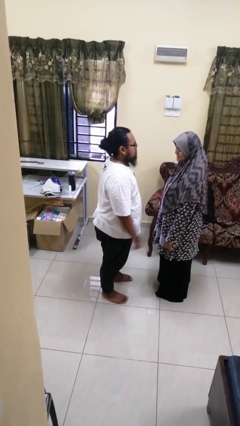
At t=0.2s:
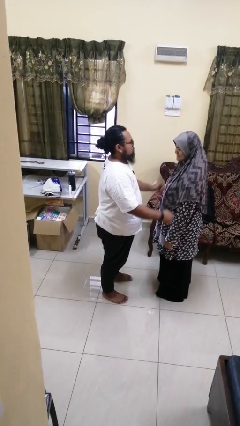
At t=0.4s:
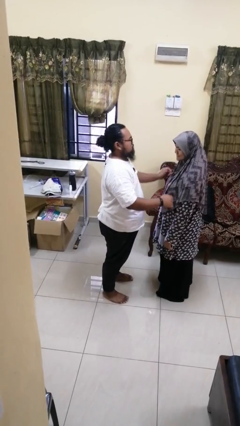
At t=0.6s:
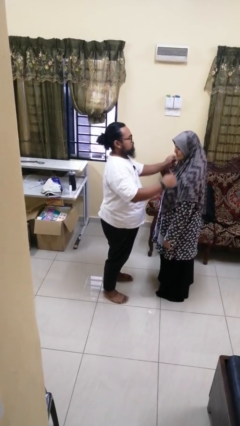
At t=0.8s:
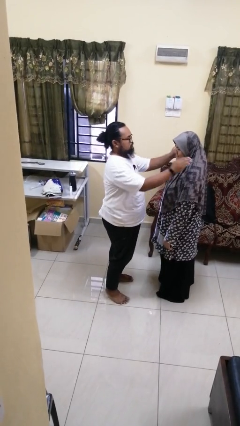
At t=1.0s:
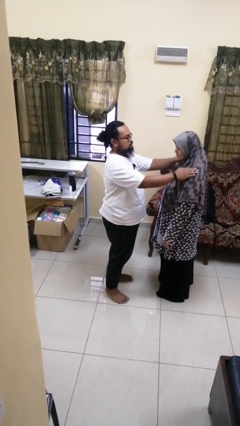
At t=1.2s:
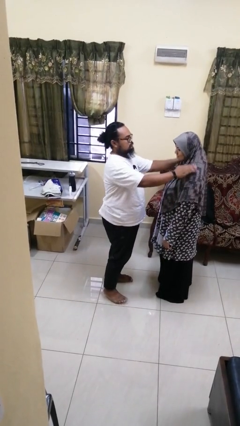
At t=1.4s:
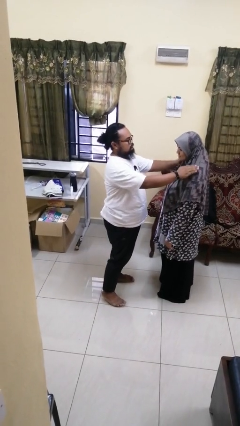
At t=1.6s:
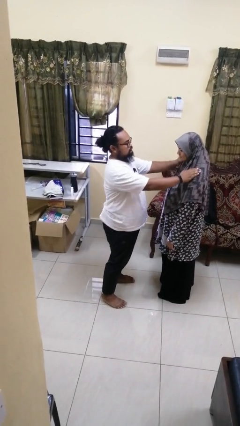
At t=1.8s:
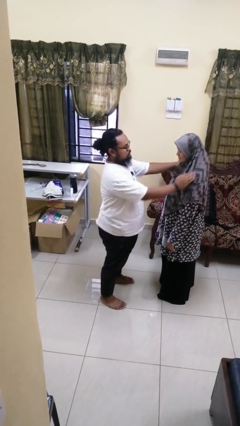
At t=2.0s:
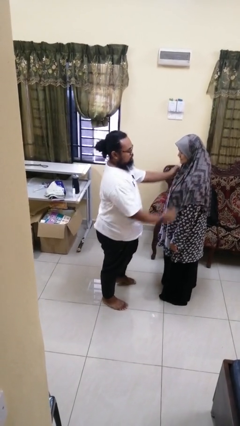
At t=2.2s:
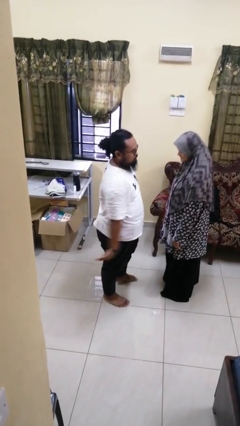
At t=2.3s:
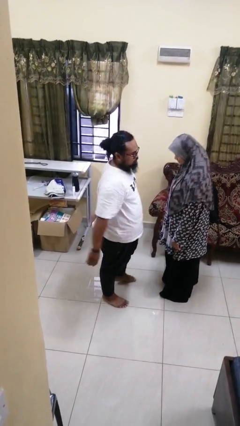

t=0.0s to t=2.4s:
person pounds shoulders of person

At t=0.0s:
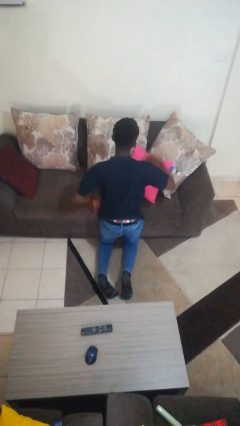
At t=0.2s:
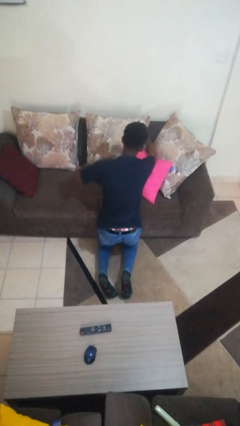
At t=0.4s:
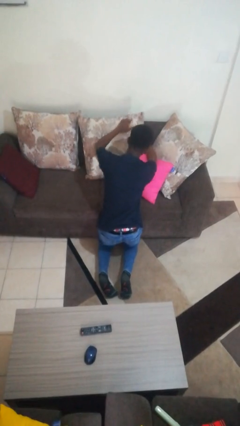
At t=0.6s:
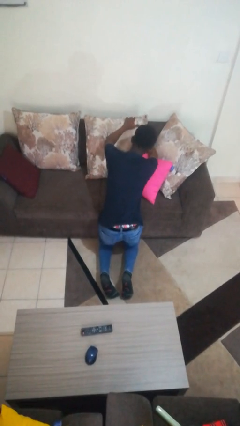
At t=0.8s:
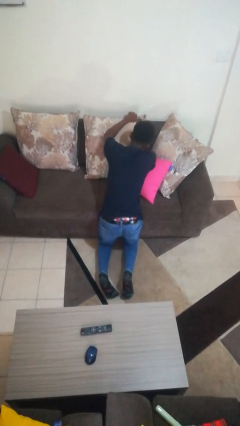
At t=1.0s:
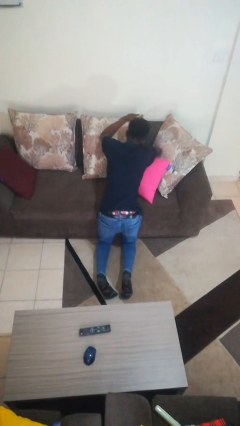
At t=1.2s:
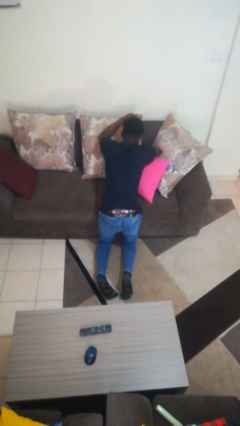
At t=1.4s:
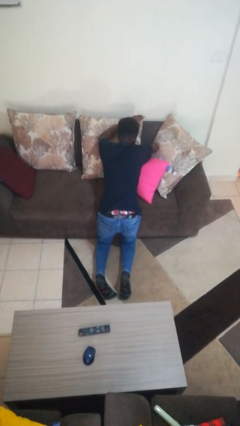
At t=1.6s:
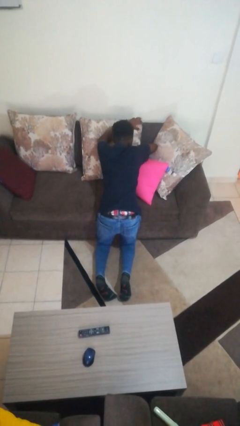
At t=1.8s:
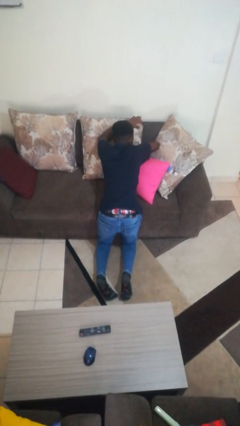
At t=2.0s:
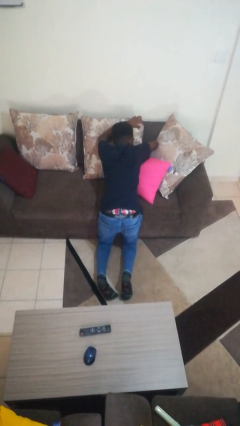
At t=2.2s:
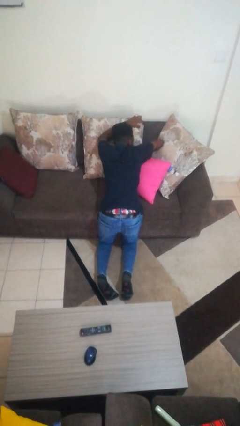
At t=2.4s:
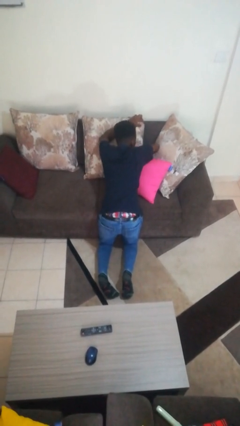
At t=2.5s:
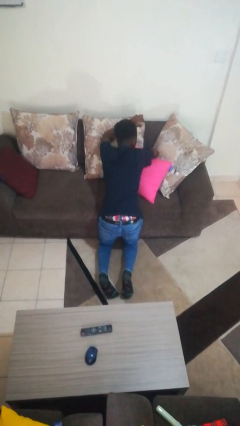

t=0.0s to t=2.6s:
person searches in couch

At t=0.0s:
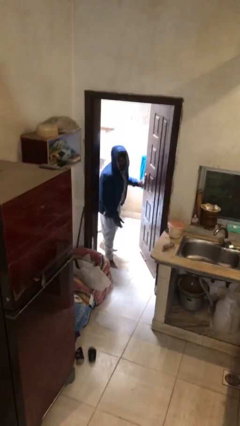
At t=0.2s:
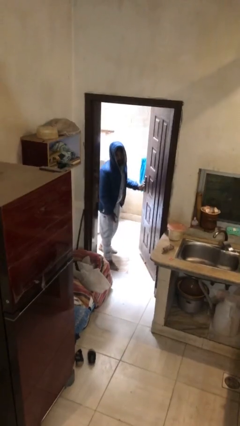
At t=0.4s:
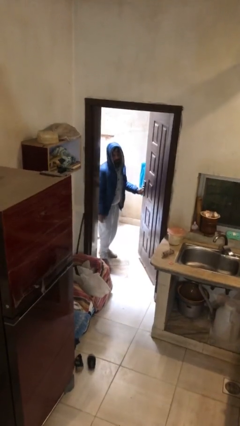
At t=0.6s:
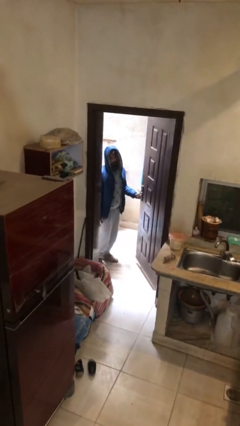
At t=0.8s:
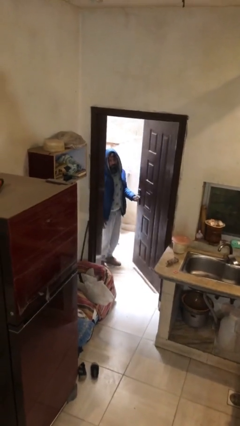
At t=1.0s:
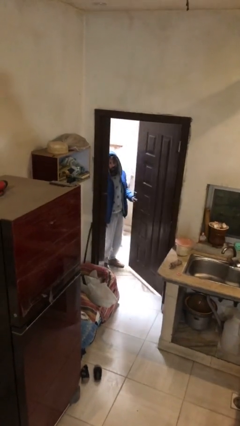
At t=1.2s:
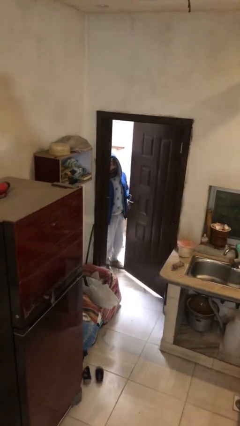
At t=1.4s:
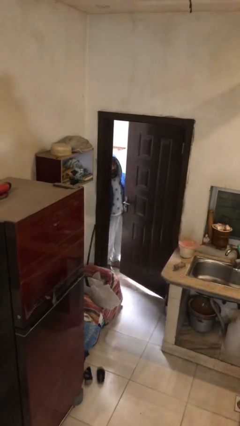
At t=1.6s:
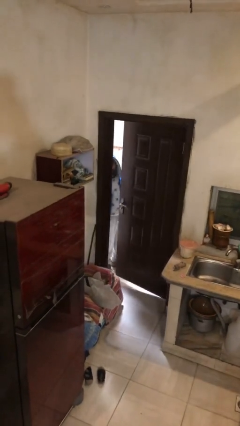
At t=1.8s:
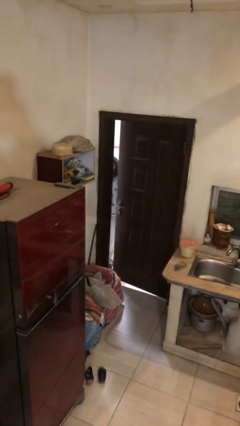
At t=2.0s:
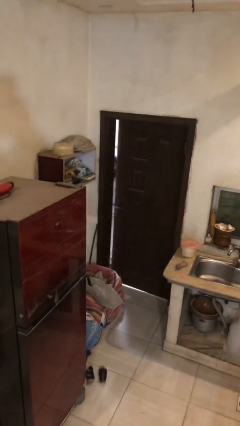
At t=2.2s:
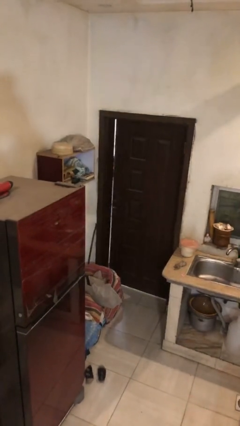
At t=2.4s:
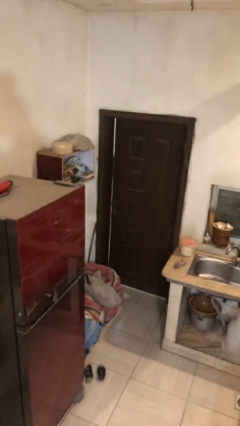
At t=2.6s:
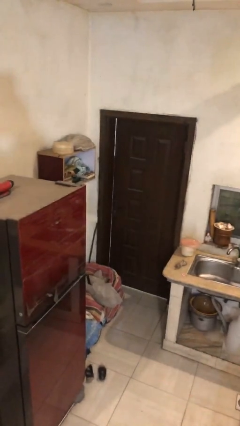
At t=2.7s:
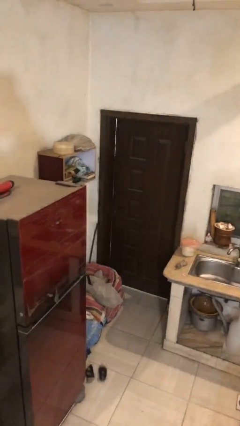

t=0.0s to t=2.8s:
person closes facility door

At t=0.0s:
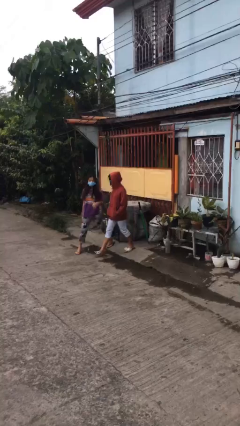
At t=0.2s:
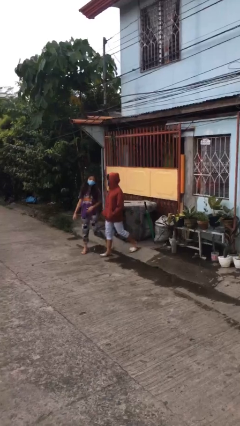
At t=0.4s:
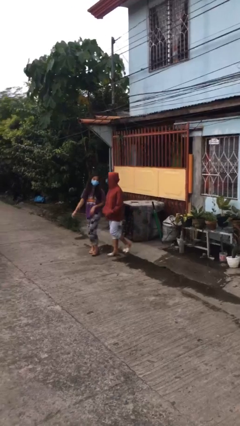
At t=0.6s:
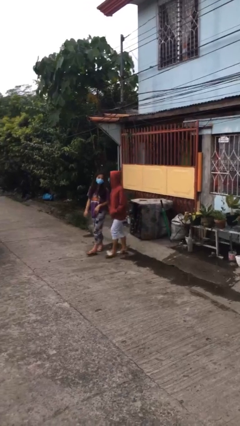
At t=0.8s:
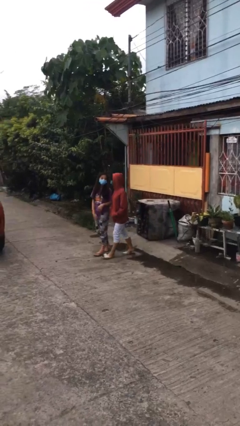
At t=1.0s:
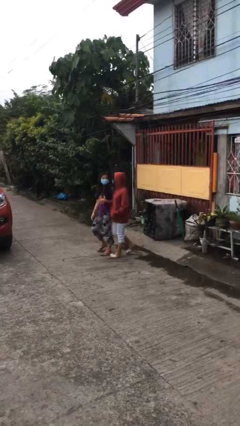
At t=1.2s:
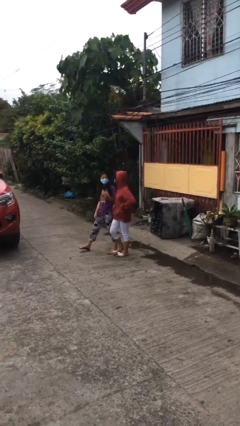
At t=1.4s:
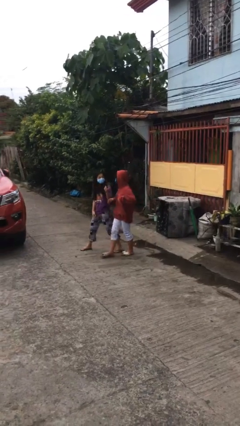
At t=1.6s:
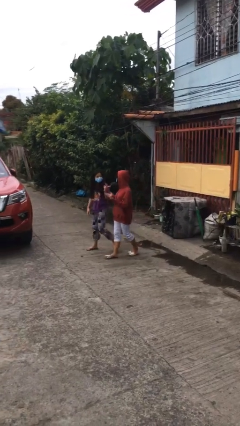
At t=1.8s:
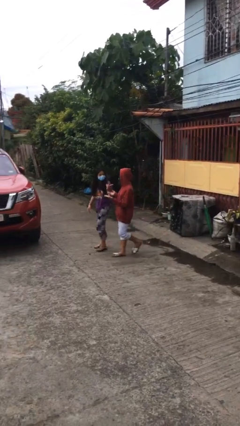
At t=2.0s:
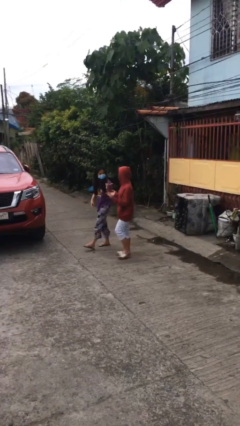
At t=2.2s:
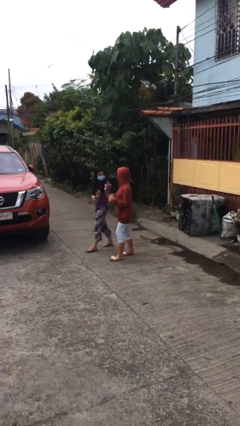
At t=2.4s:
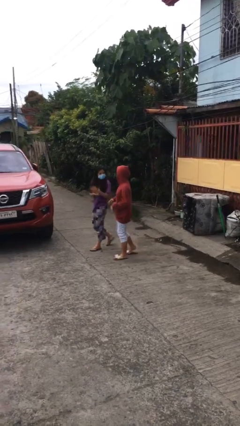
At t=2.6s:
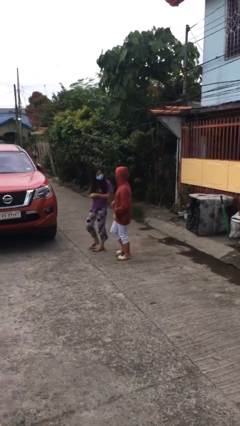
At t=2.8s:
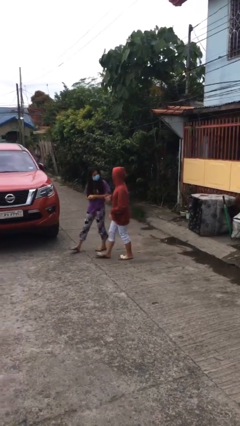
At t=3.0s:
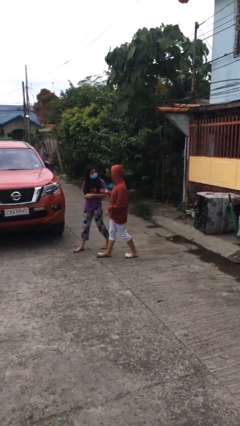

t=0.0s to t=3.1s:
person talks to person

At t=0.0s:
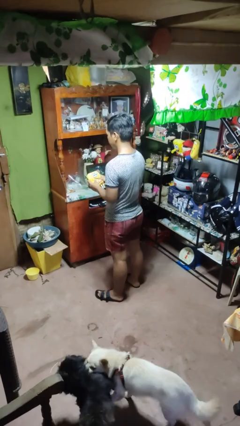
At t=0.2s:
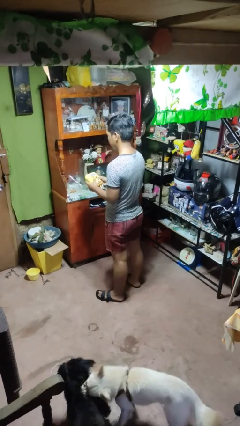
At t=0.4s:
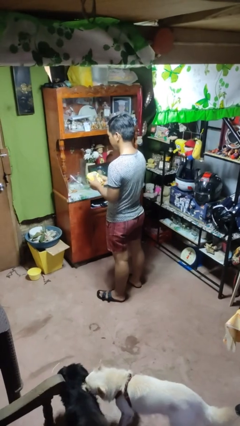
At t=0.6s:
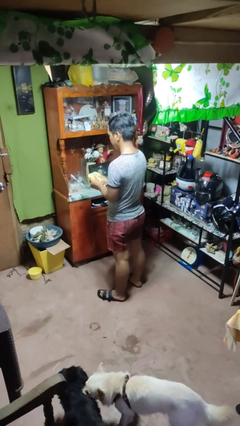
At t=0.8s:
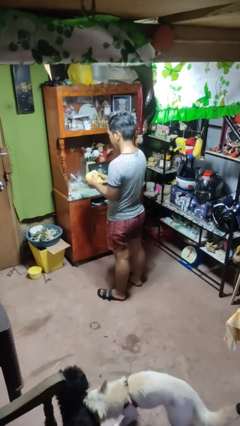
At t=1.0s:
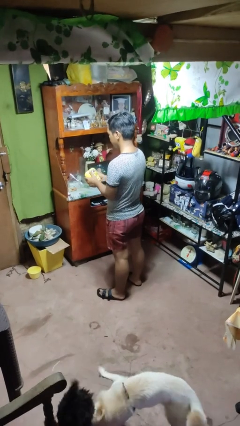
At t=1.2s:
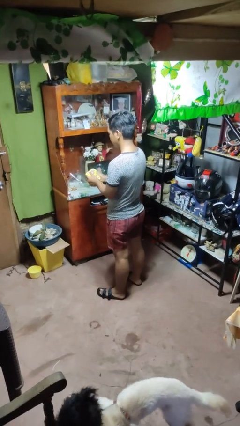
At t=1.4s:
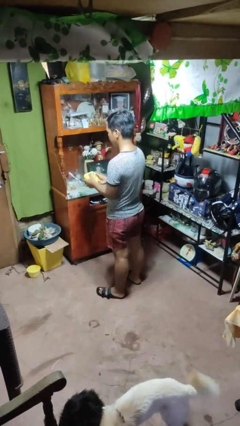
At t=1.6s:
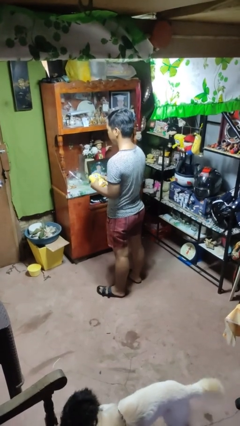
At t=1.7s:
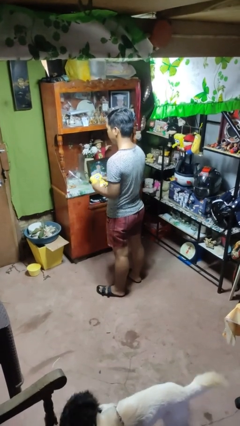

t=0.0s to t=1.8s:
person squeezes object

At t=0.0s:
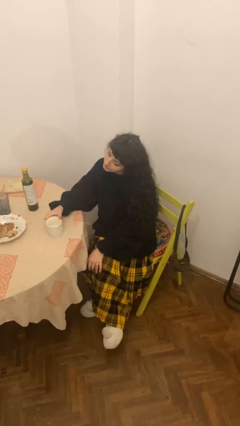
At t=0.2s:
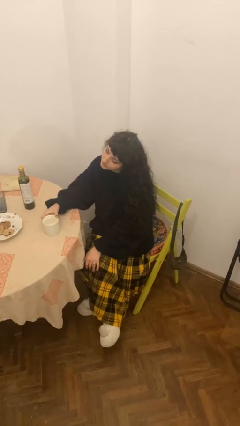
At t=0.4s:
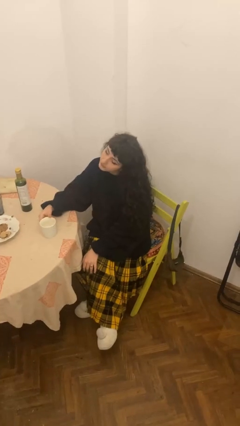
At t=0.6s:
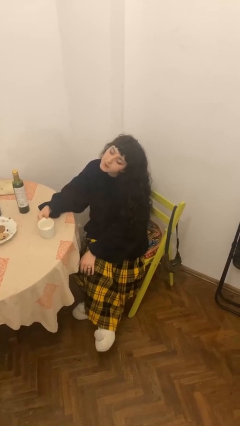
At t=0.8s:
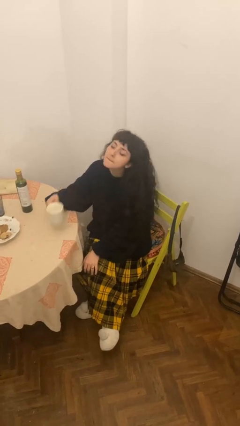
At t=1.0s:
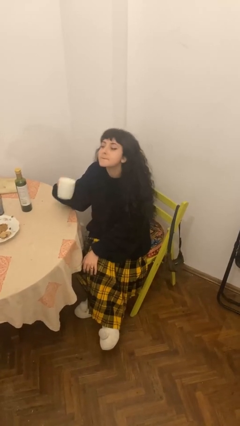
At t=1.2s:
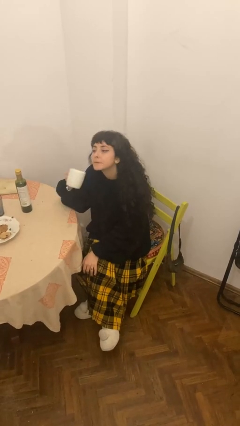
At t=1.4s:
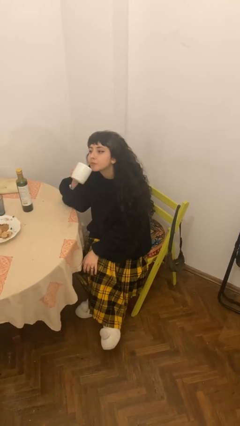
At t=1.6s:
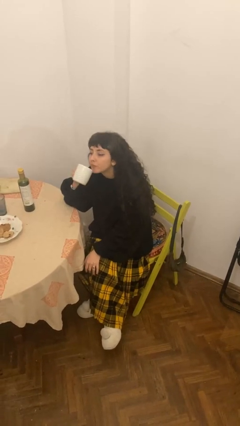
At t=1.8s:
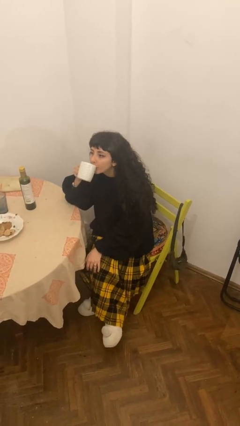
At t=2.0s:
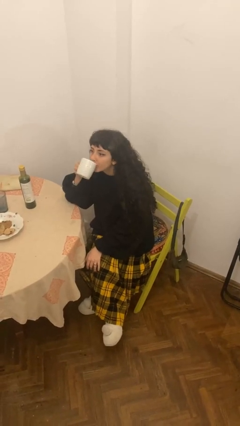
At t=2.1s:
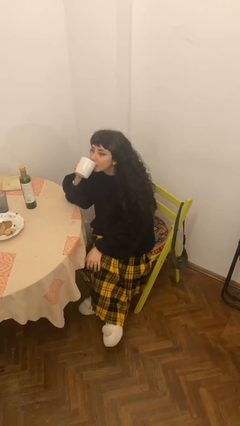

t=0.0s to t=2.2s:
person picks up object from table

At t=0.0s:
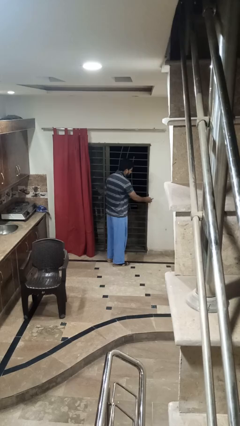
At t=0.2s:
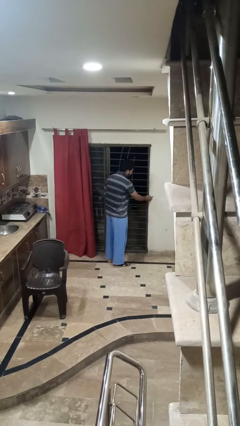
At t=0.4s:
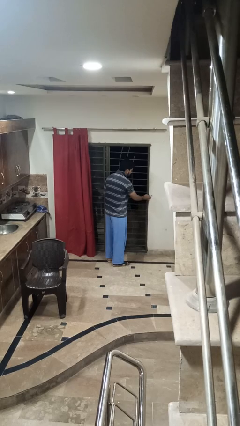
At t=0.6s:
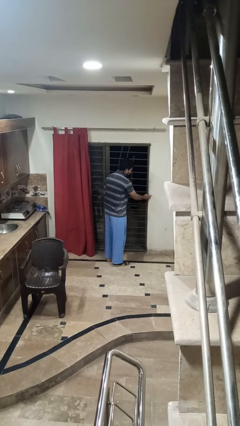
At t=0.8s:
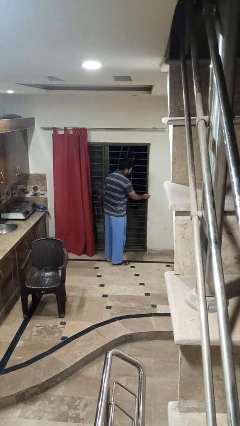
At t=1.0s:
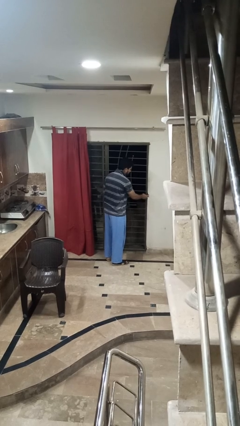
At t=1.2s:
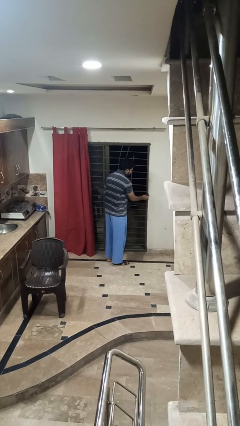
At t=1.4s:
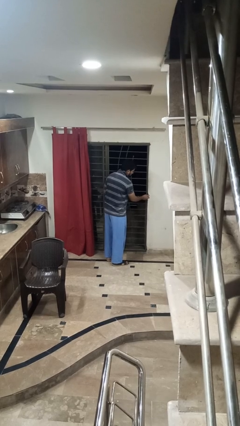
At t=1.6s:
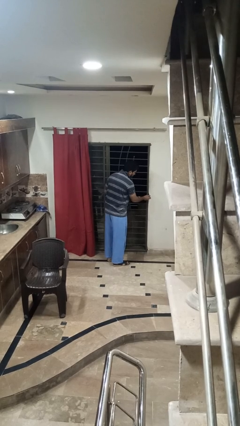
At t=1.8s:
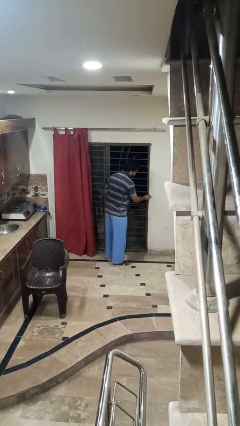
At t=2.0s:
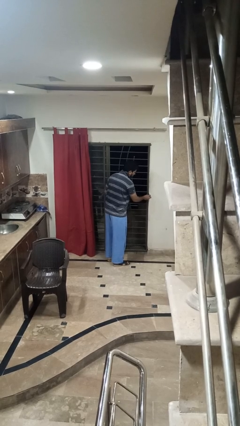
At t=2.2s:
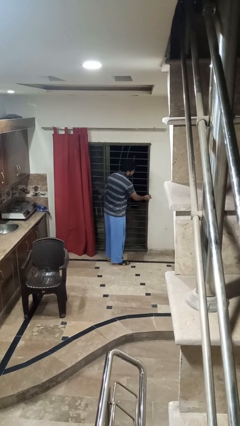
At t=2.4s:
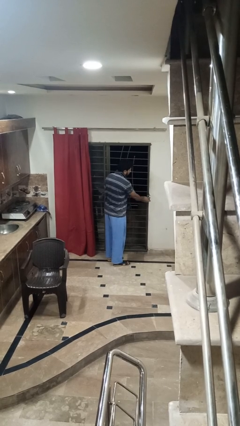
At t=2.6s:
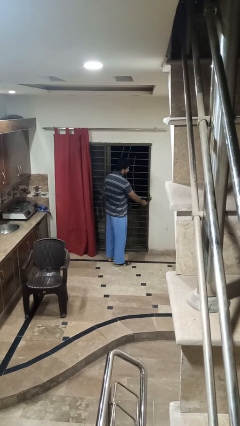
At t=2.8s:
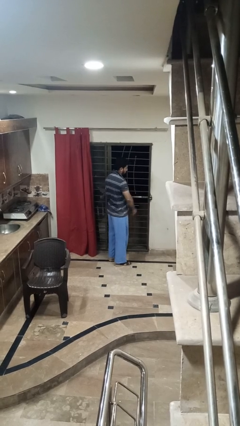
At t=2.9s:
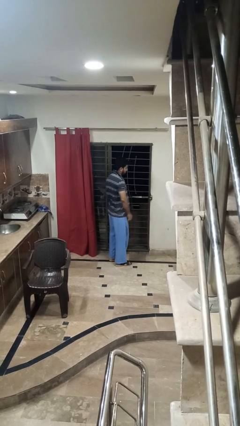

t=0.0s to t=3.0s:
person locks door with keys
